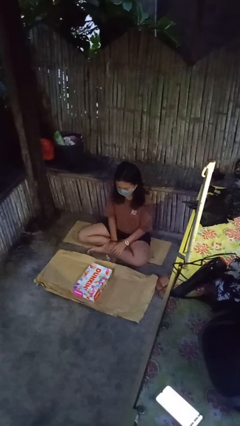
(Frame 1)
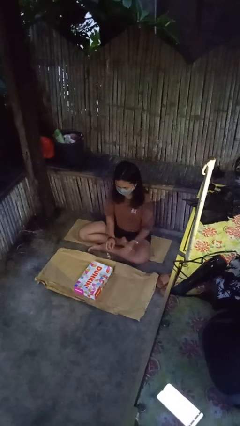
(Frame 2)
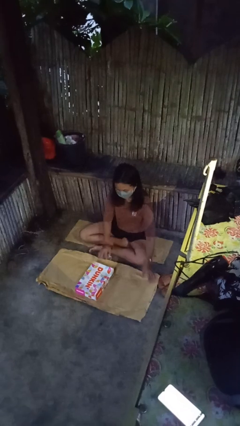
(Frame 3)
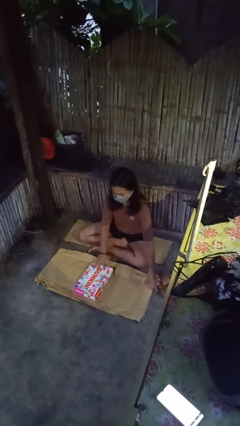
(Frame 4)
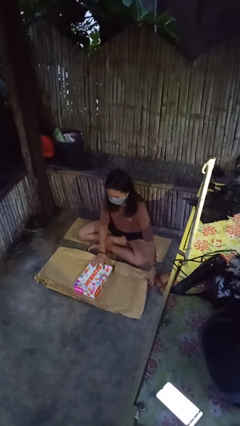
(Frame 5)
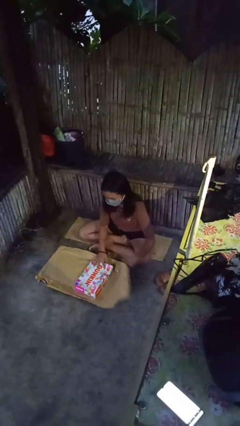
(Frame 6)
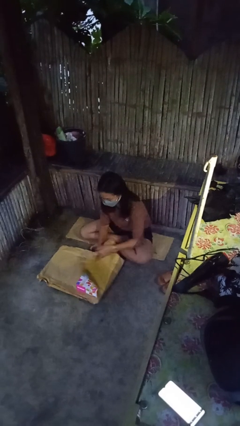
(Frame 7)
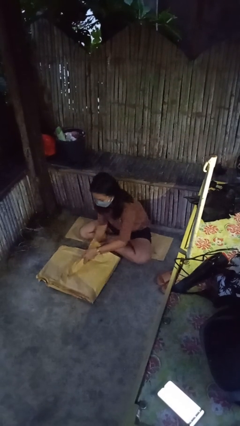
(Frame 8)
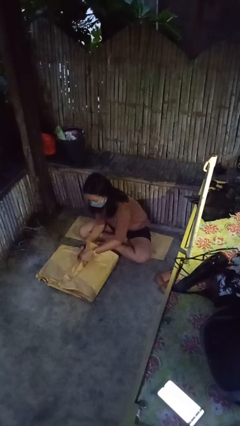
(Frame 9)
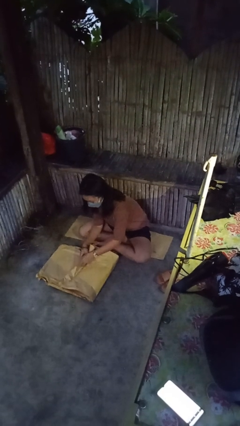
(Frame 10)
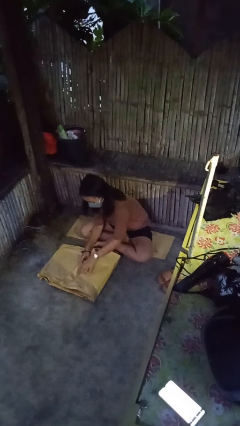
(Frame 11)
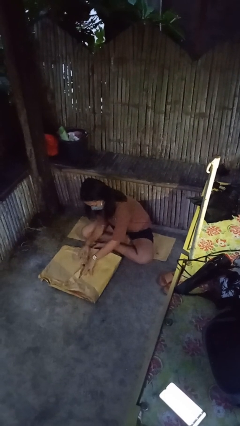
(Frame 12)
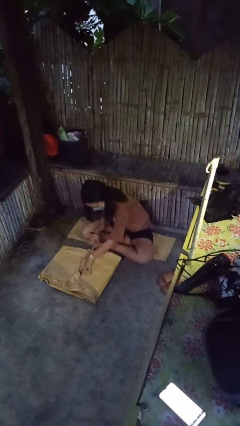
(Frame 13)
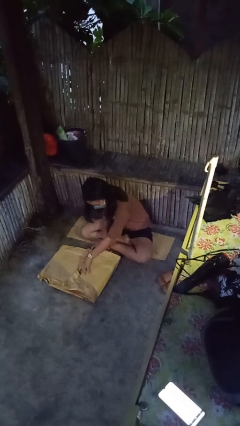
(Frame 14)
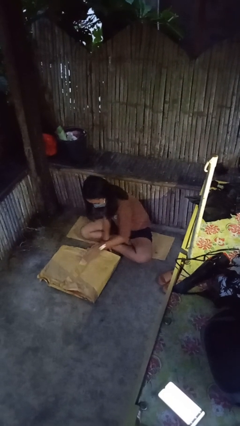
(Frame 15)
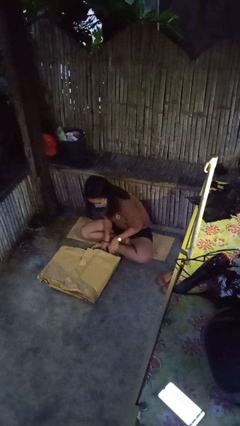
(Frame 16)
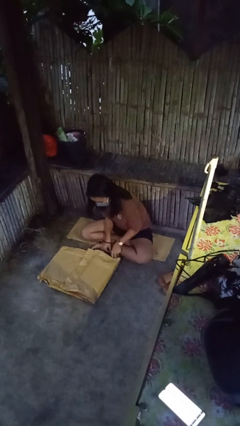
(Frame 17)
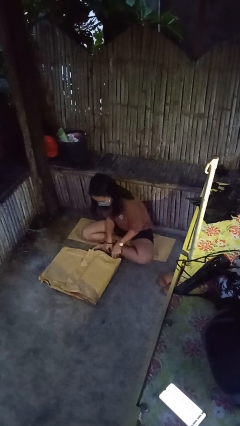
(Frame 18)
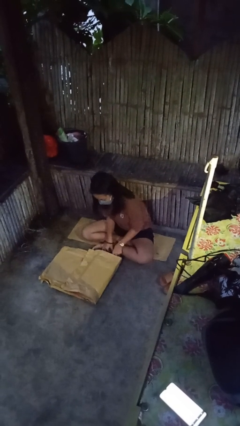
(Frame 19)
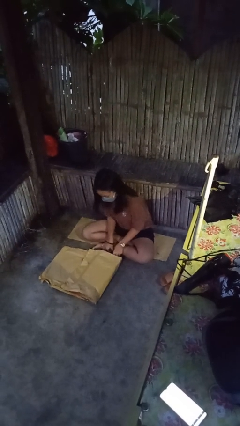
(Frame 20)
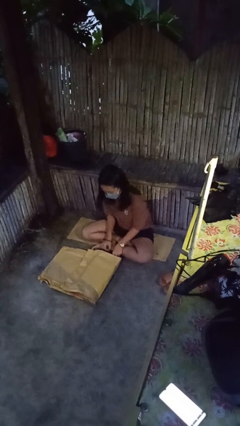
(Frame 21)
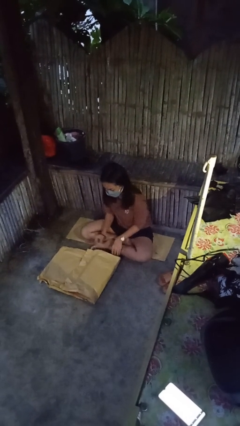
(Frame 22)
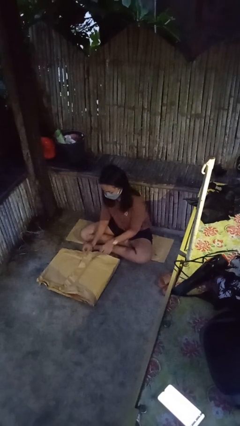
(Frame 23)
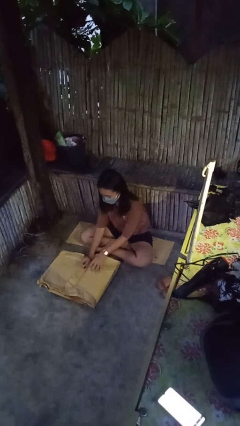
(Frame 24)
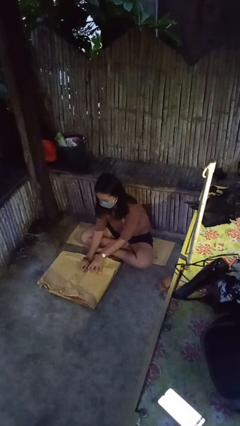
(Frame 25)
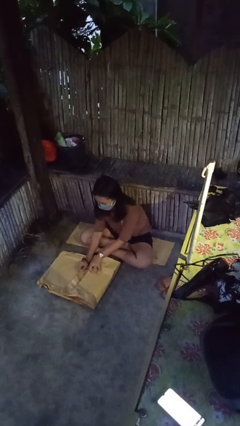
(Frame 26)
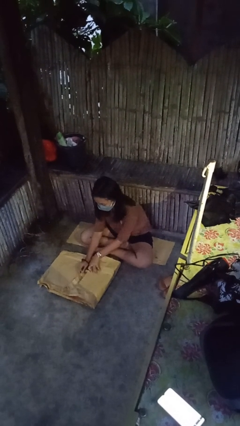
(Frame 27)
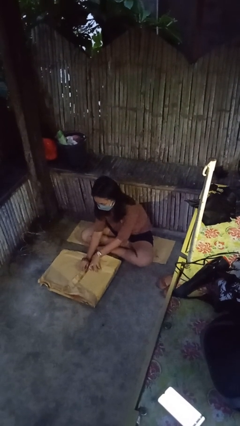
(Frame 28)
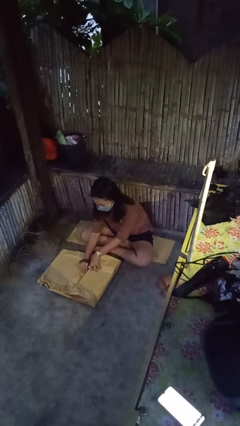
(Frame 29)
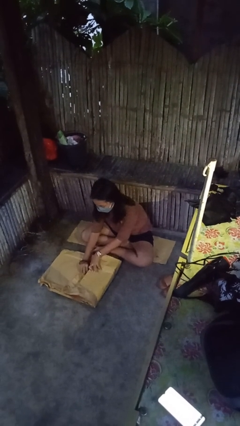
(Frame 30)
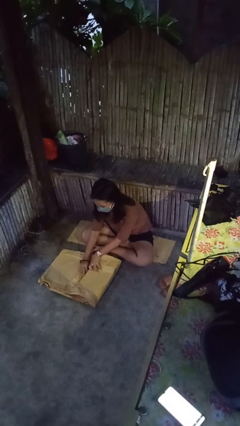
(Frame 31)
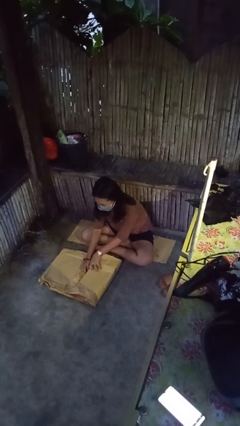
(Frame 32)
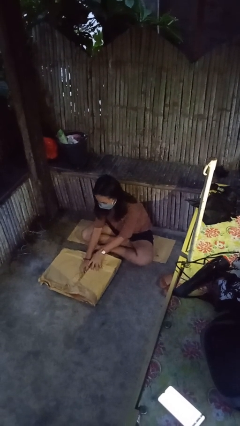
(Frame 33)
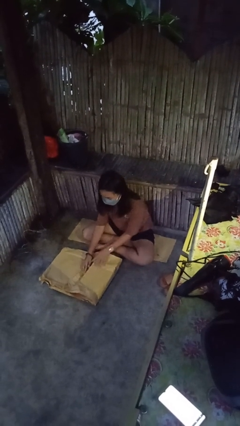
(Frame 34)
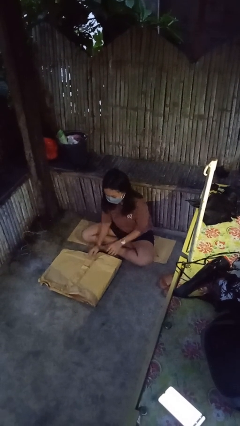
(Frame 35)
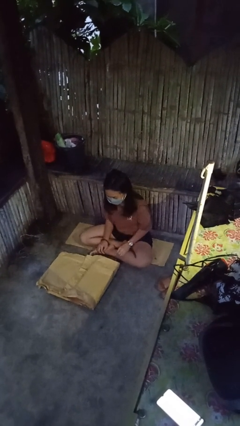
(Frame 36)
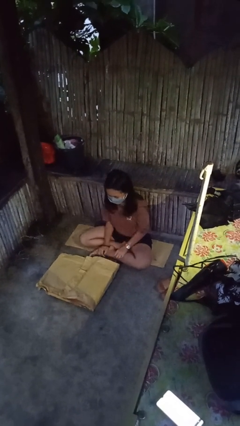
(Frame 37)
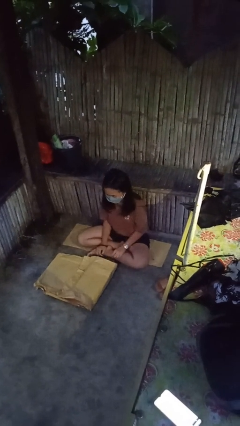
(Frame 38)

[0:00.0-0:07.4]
person wraps box

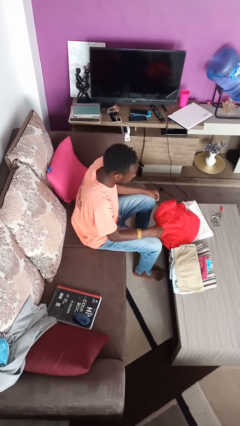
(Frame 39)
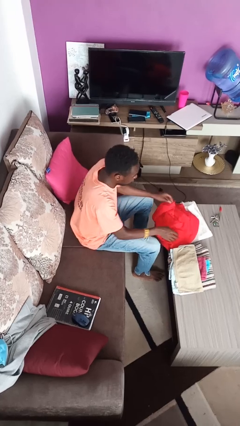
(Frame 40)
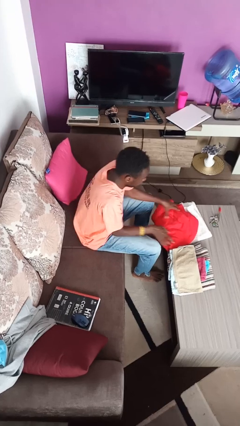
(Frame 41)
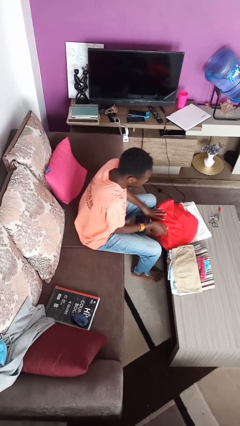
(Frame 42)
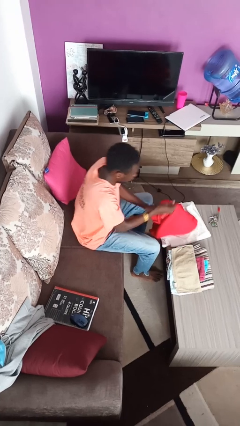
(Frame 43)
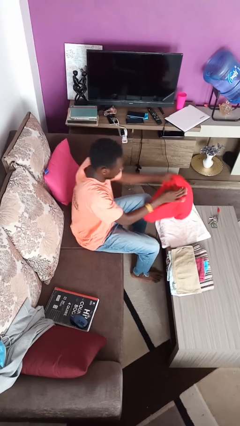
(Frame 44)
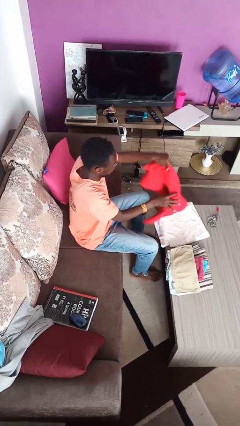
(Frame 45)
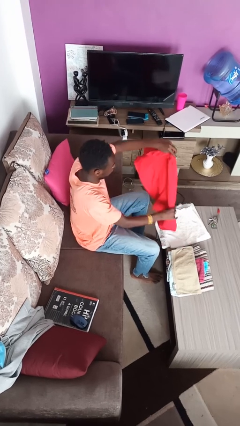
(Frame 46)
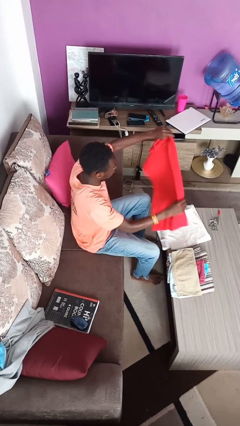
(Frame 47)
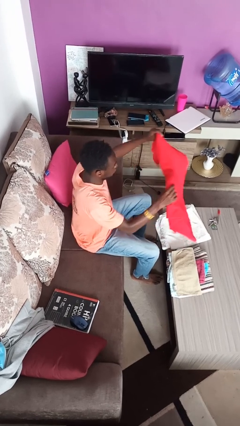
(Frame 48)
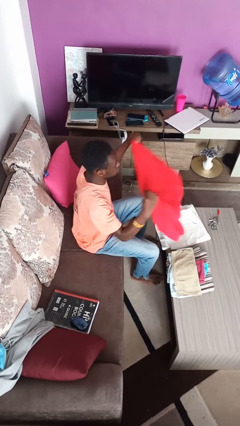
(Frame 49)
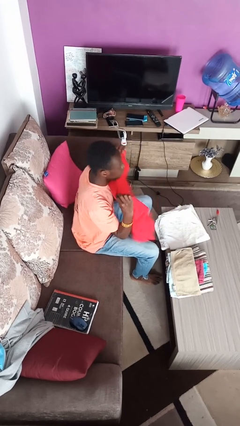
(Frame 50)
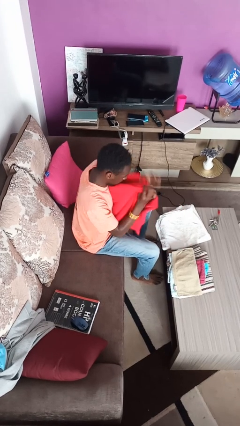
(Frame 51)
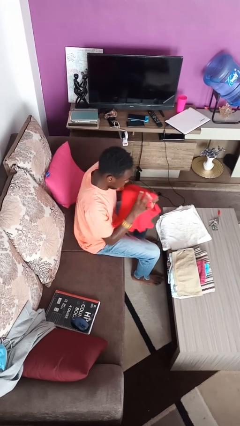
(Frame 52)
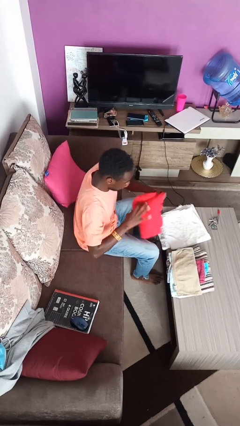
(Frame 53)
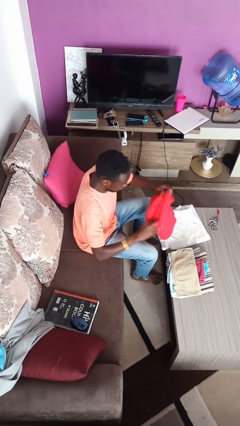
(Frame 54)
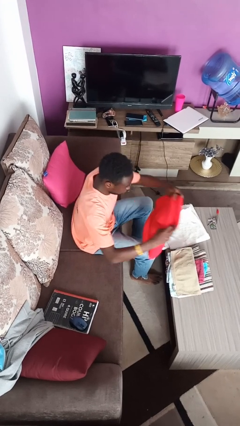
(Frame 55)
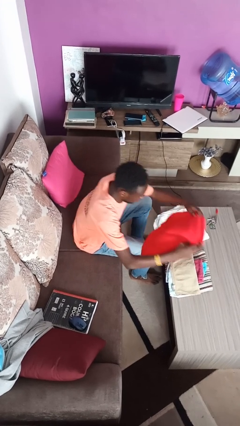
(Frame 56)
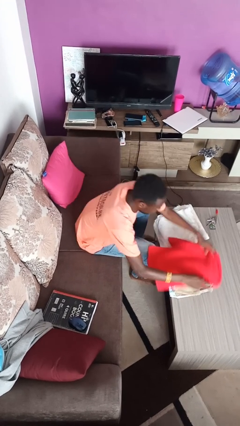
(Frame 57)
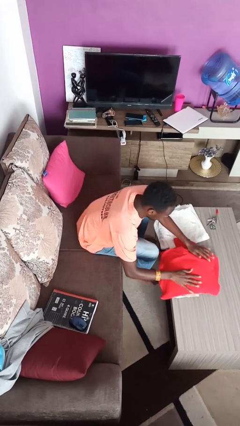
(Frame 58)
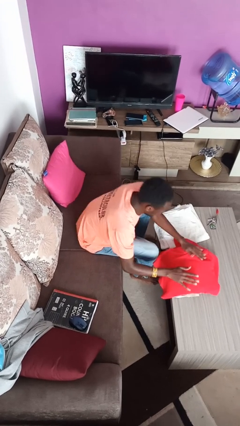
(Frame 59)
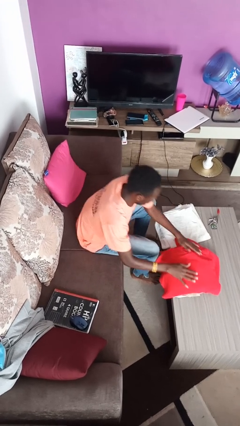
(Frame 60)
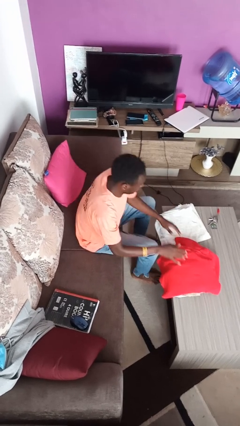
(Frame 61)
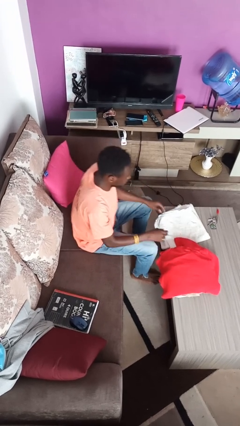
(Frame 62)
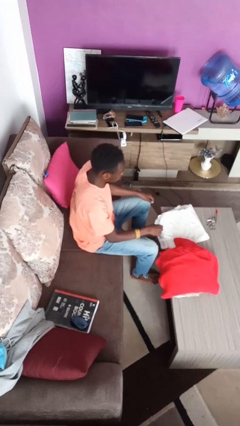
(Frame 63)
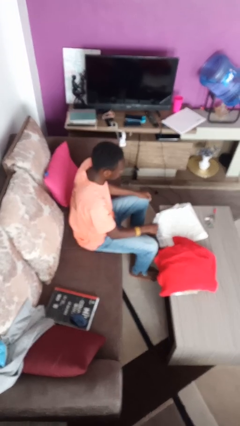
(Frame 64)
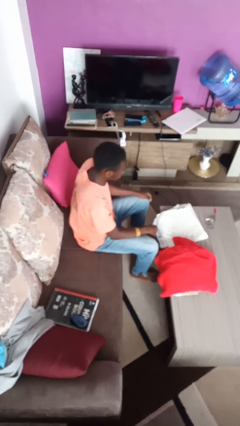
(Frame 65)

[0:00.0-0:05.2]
person folds towel

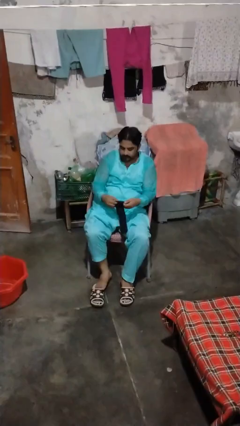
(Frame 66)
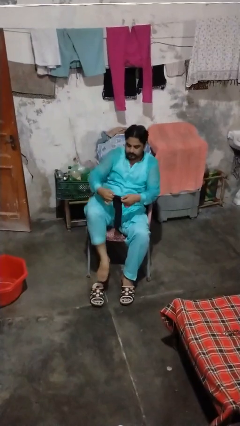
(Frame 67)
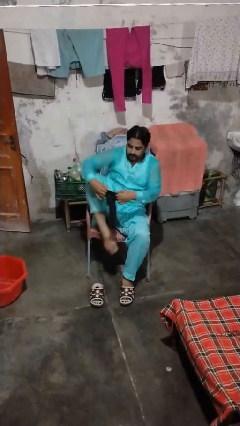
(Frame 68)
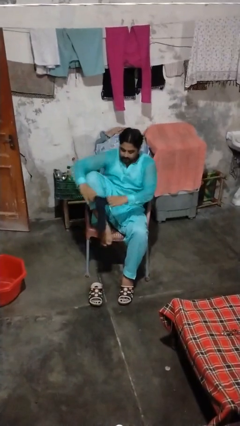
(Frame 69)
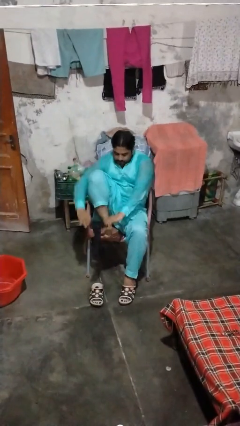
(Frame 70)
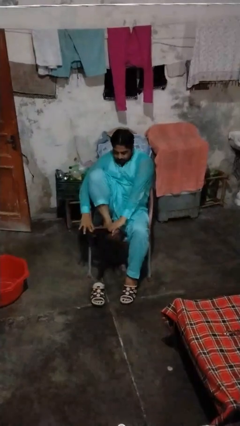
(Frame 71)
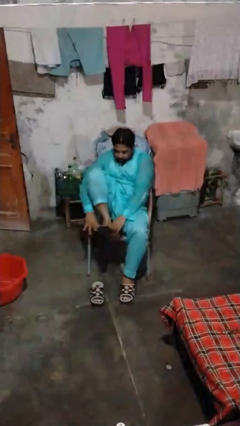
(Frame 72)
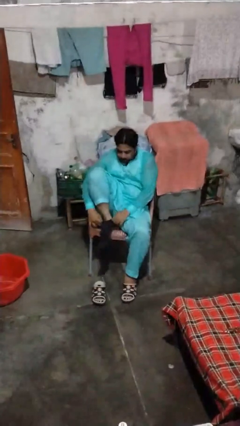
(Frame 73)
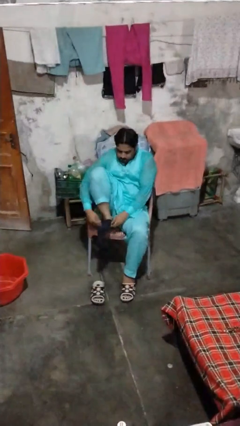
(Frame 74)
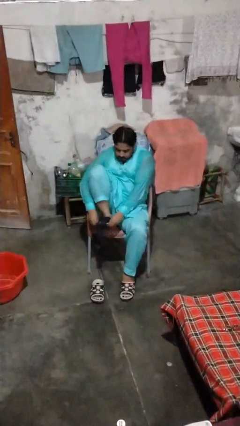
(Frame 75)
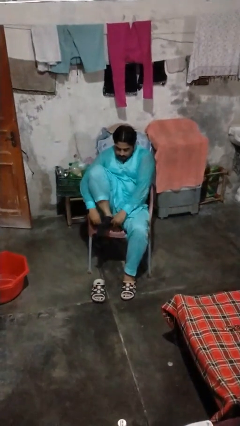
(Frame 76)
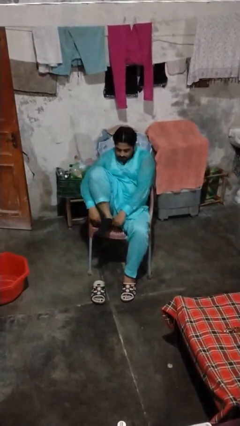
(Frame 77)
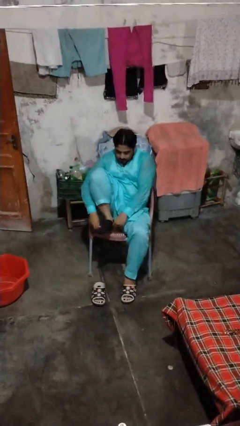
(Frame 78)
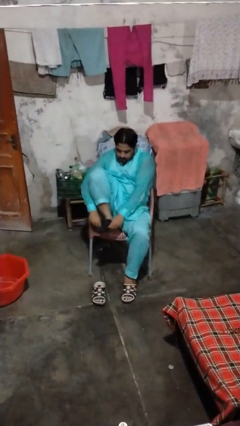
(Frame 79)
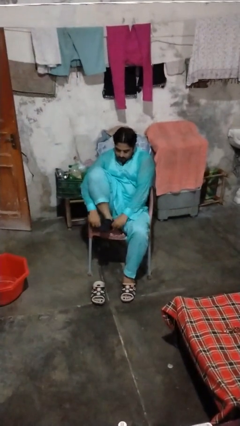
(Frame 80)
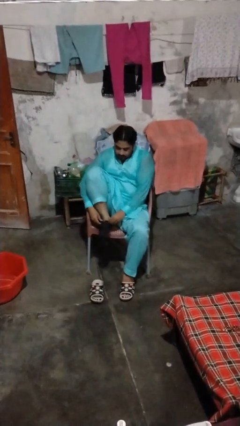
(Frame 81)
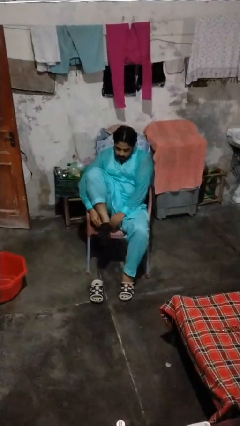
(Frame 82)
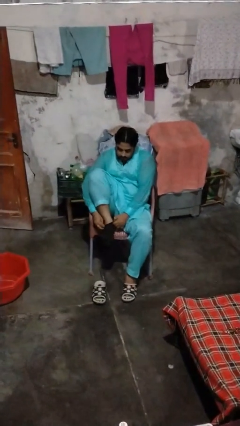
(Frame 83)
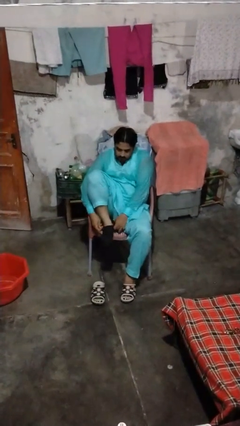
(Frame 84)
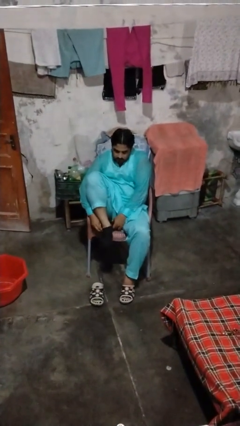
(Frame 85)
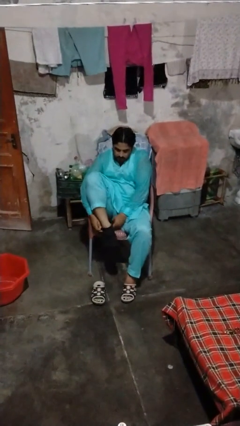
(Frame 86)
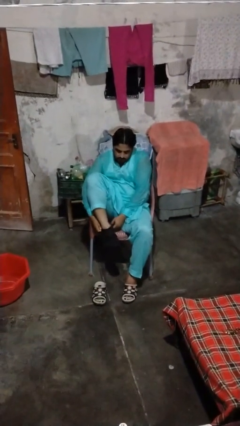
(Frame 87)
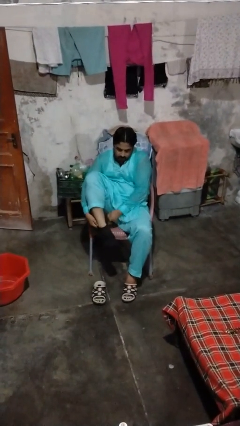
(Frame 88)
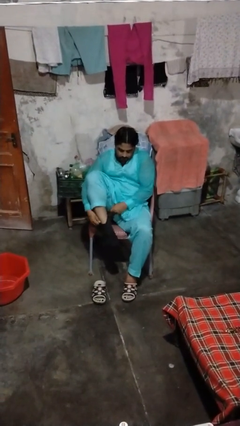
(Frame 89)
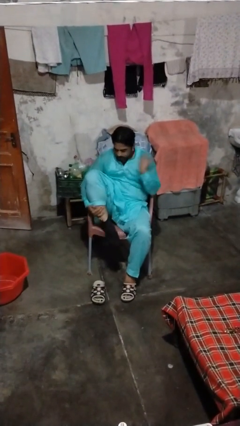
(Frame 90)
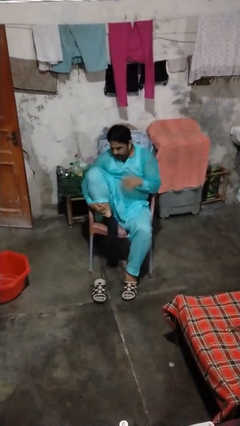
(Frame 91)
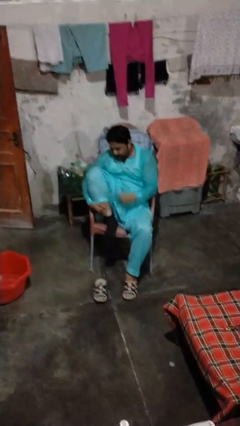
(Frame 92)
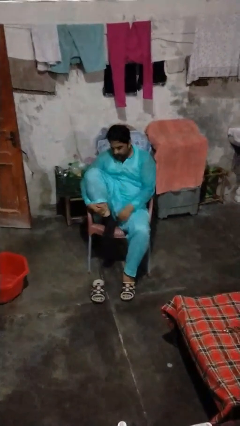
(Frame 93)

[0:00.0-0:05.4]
person puts on socks
